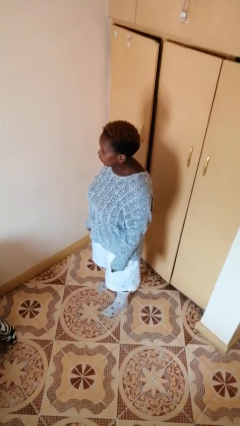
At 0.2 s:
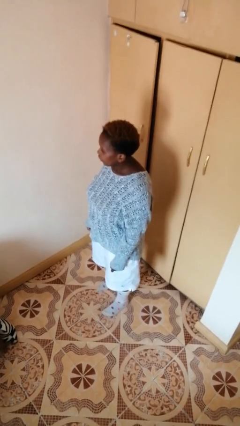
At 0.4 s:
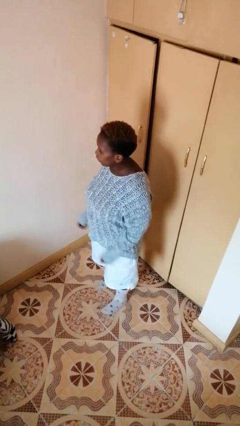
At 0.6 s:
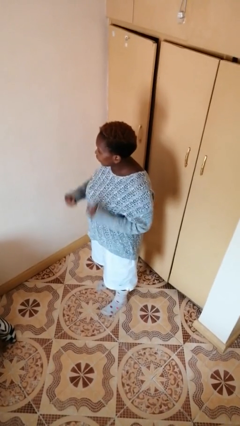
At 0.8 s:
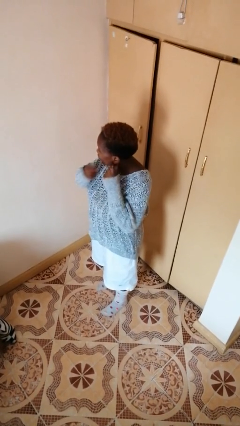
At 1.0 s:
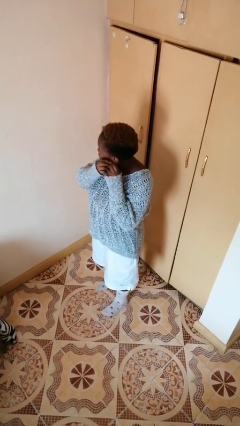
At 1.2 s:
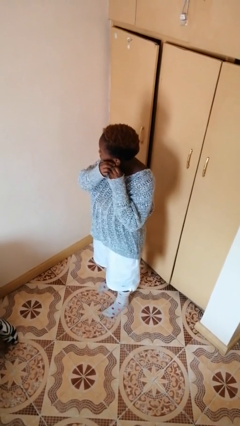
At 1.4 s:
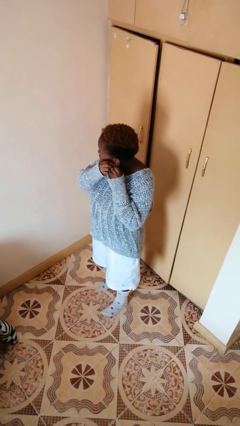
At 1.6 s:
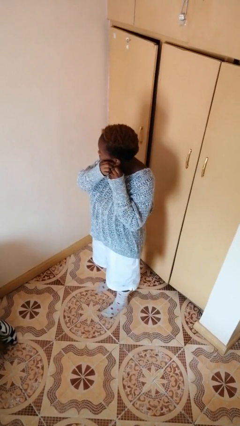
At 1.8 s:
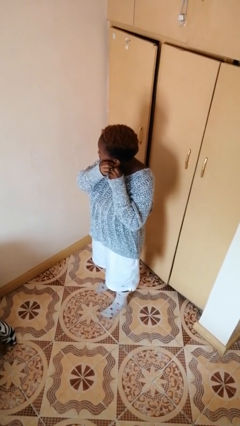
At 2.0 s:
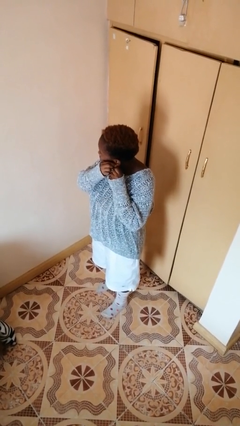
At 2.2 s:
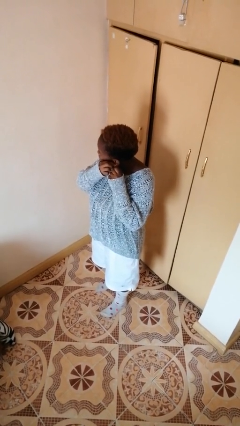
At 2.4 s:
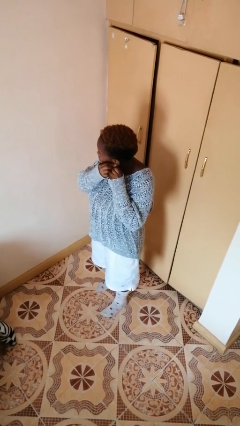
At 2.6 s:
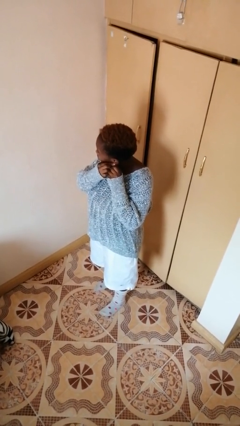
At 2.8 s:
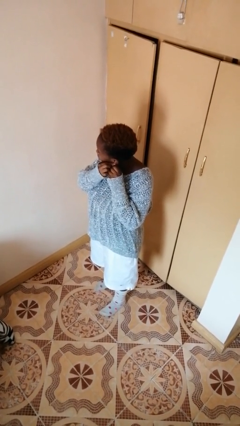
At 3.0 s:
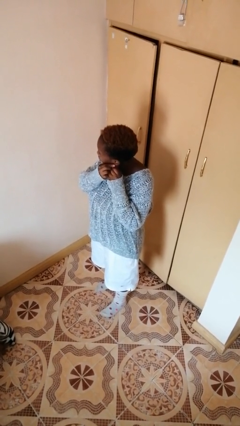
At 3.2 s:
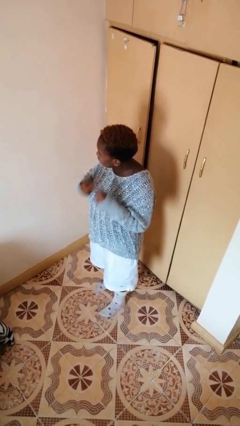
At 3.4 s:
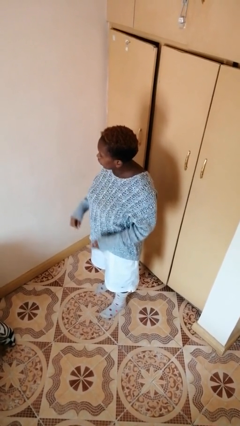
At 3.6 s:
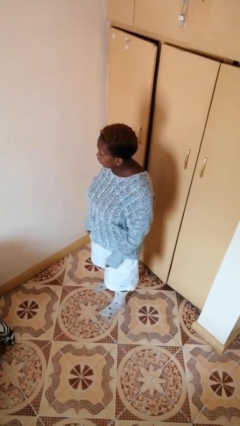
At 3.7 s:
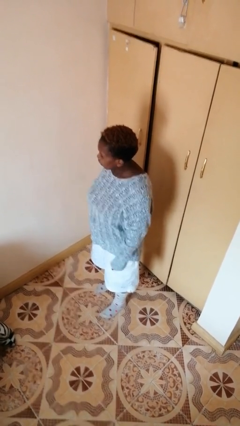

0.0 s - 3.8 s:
person puts on earrings

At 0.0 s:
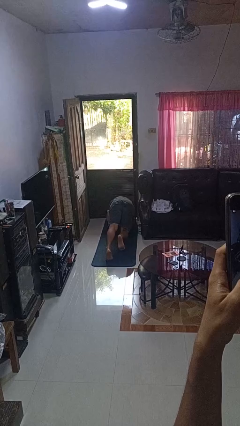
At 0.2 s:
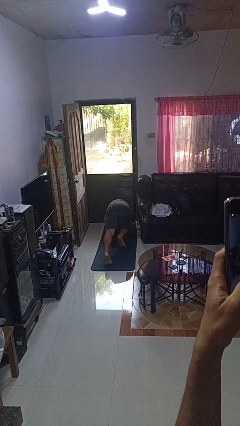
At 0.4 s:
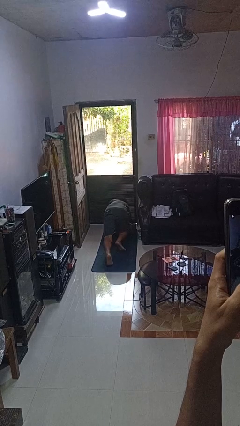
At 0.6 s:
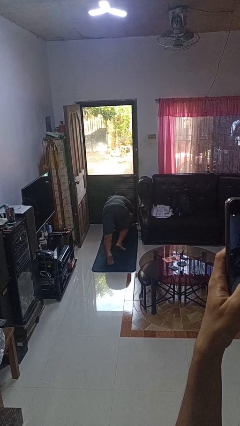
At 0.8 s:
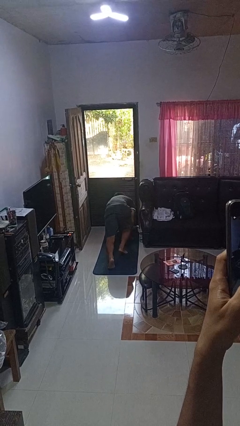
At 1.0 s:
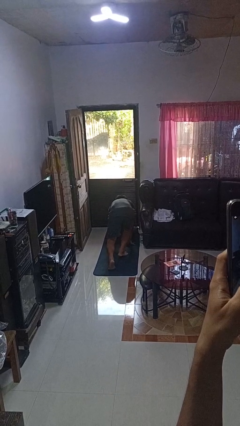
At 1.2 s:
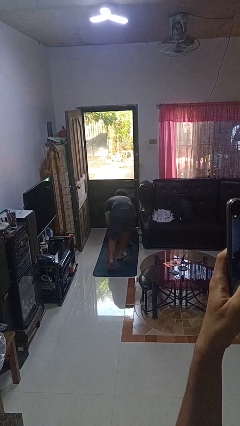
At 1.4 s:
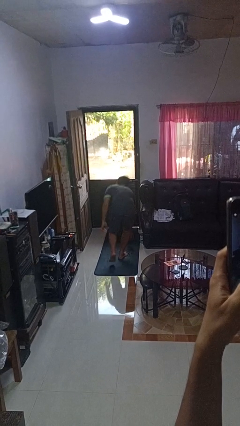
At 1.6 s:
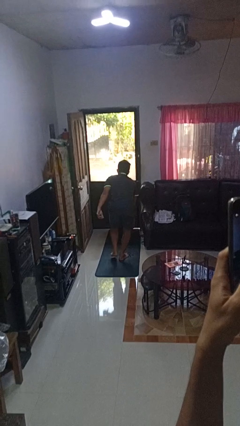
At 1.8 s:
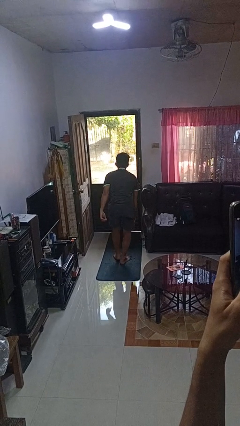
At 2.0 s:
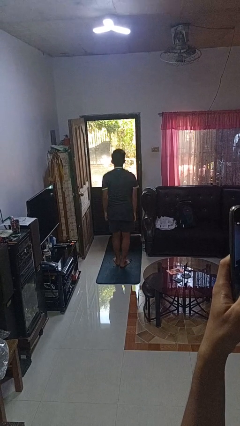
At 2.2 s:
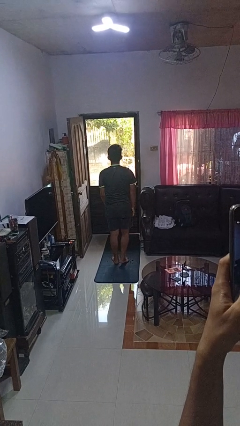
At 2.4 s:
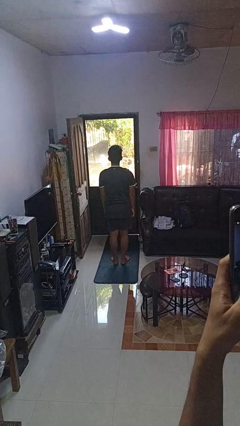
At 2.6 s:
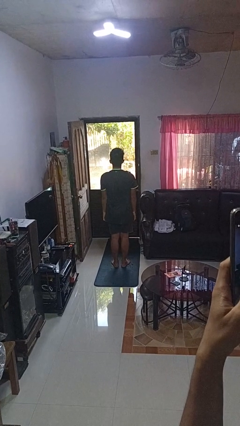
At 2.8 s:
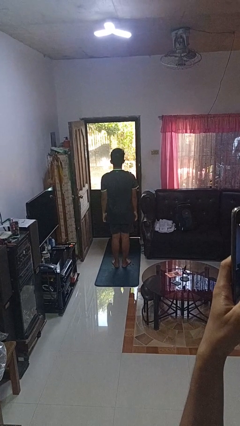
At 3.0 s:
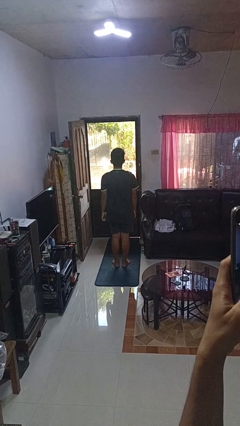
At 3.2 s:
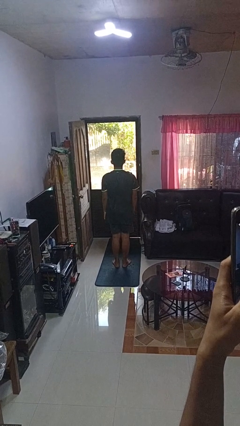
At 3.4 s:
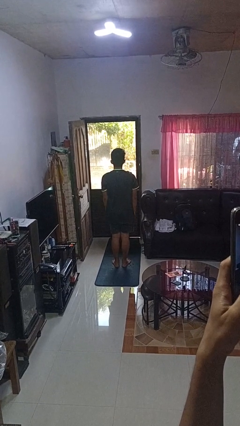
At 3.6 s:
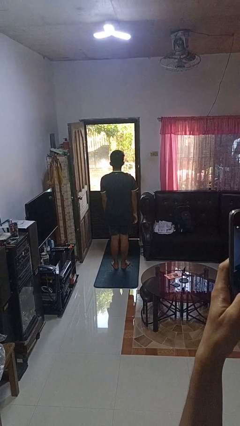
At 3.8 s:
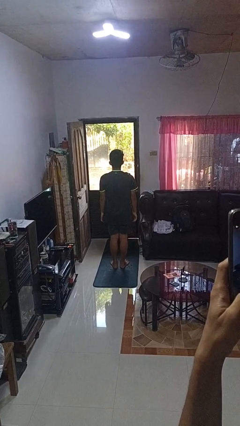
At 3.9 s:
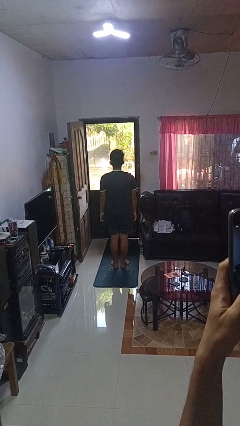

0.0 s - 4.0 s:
person stands up from floor

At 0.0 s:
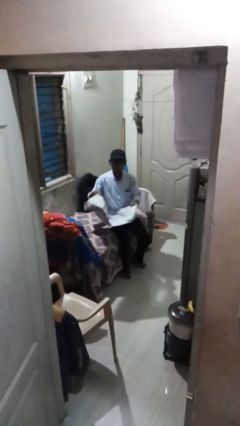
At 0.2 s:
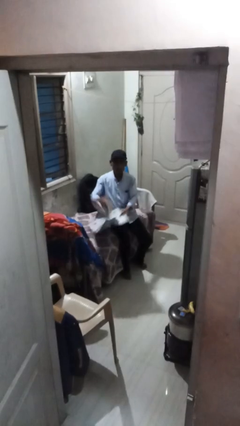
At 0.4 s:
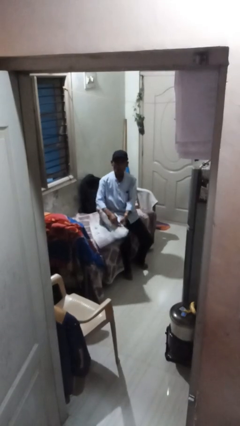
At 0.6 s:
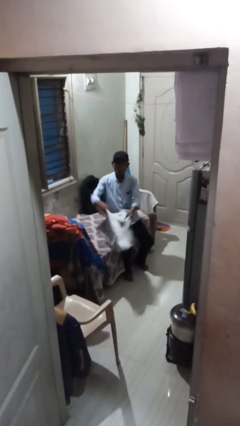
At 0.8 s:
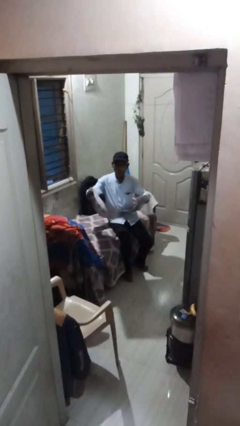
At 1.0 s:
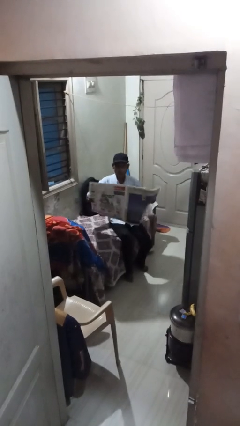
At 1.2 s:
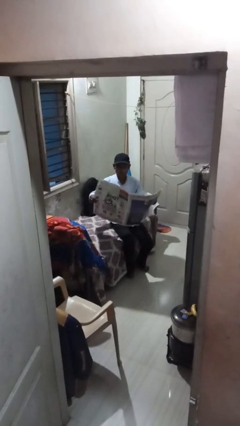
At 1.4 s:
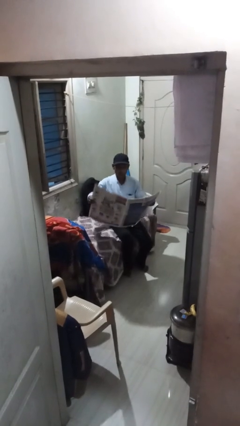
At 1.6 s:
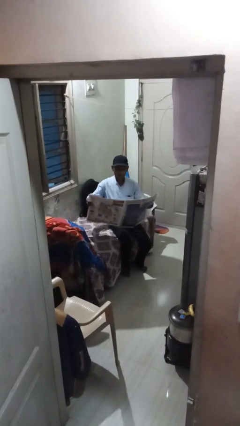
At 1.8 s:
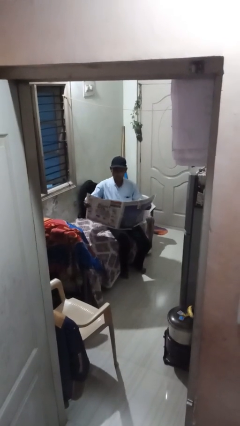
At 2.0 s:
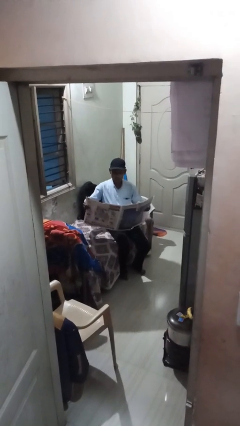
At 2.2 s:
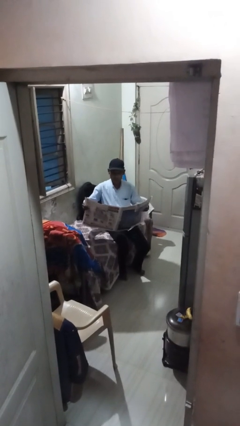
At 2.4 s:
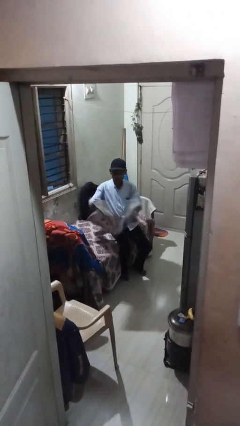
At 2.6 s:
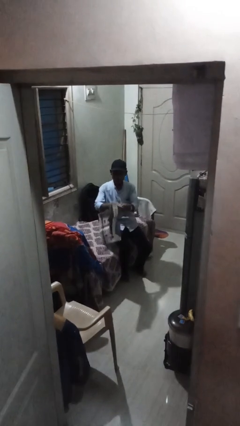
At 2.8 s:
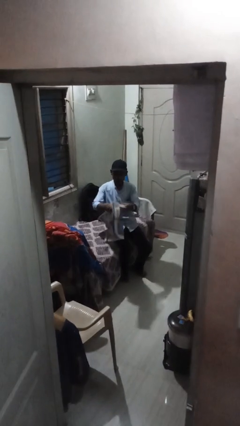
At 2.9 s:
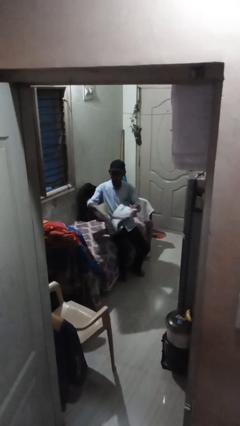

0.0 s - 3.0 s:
person reads newspaper

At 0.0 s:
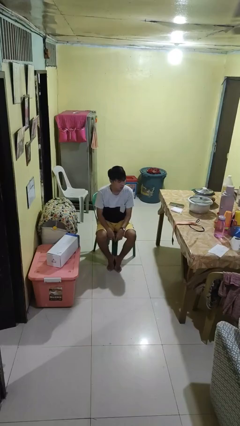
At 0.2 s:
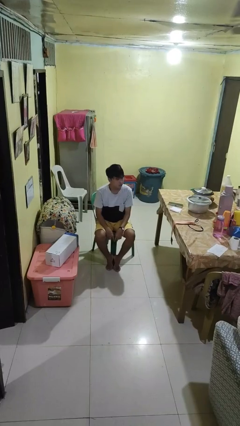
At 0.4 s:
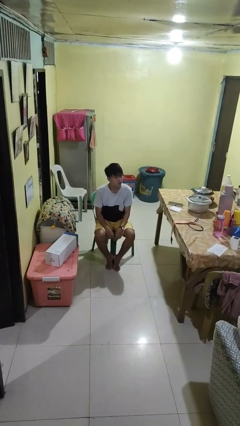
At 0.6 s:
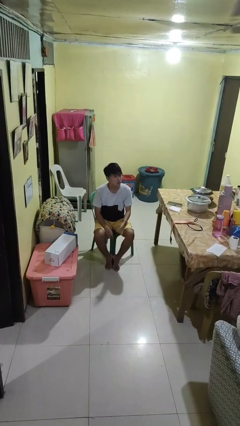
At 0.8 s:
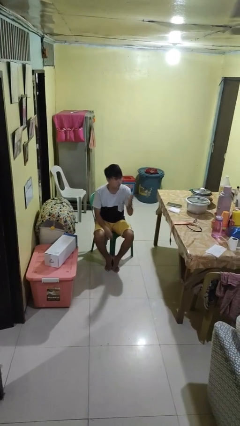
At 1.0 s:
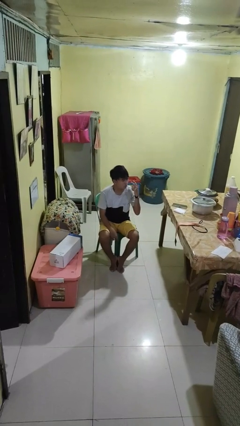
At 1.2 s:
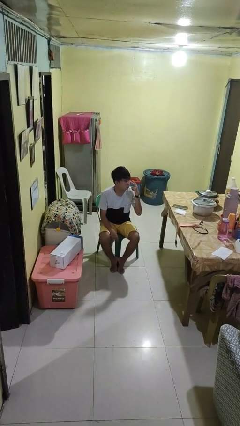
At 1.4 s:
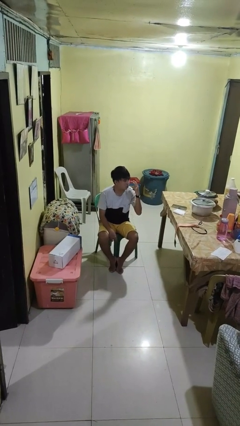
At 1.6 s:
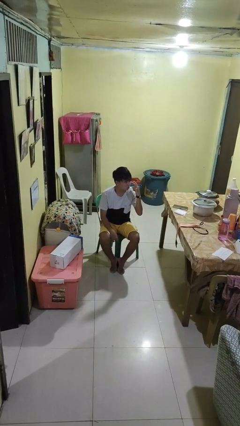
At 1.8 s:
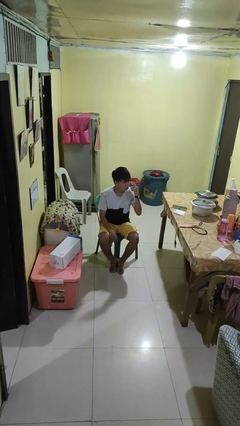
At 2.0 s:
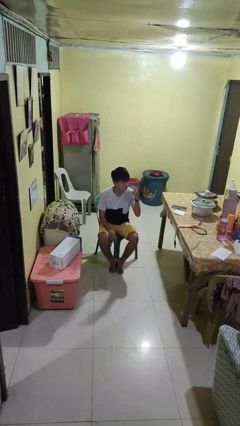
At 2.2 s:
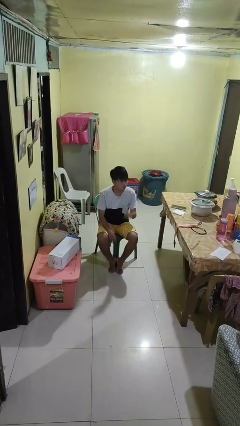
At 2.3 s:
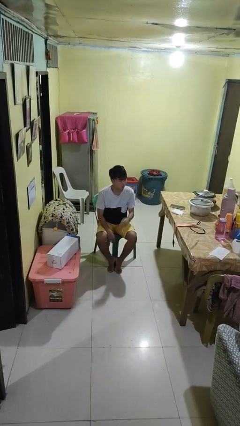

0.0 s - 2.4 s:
person gestures watch closely

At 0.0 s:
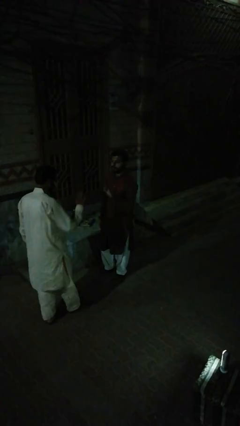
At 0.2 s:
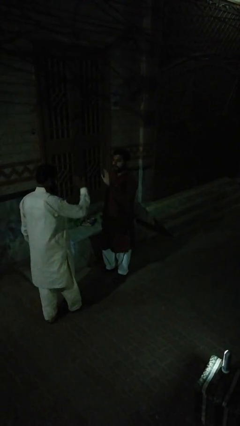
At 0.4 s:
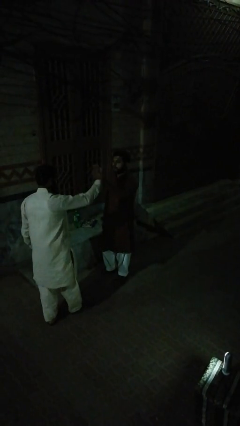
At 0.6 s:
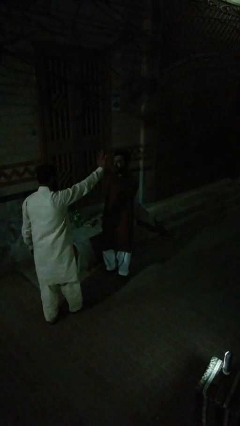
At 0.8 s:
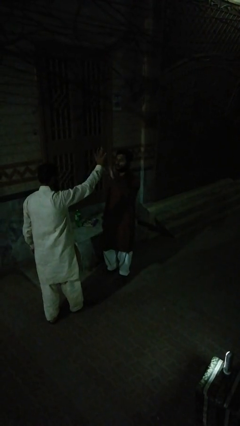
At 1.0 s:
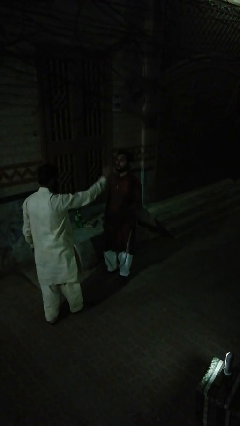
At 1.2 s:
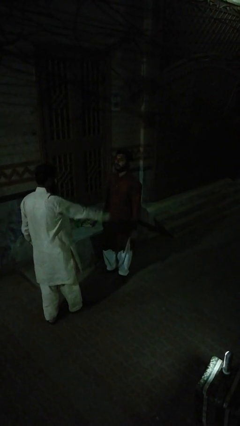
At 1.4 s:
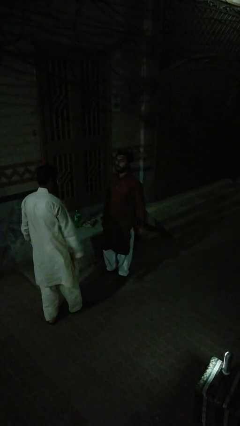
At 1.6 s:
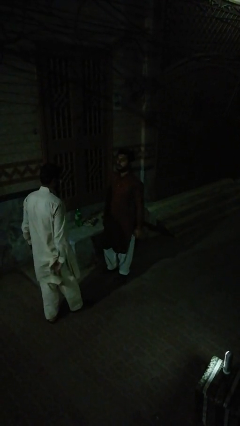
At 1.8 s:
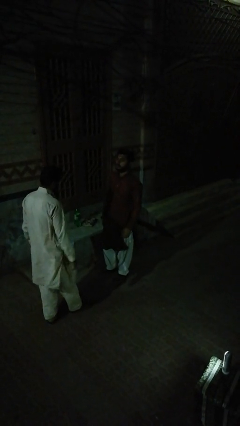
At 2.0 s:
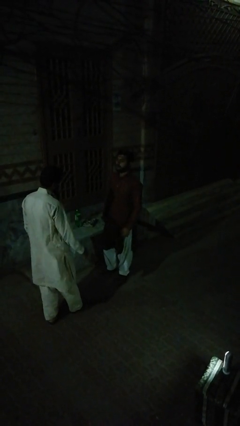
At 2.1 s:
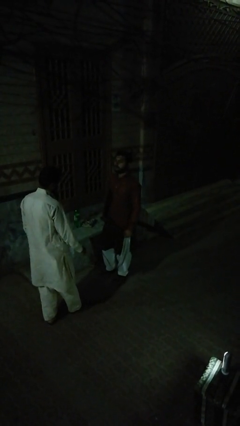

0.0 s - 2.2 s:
person highfives hand

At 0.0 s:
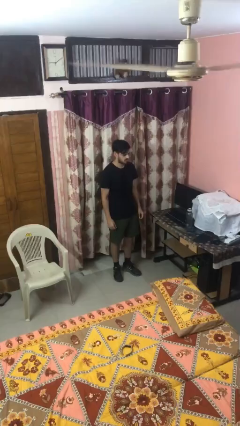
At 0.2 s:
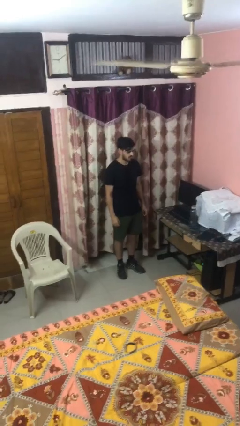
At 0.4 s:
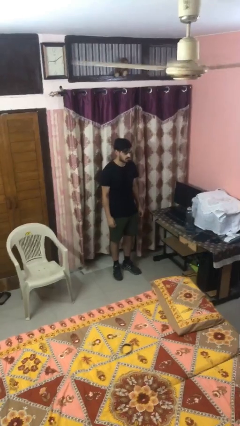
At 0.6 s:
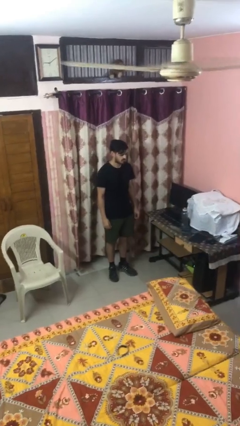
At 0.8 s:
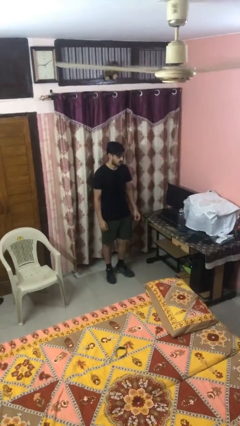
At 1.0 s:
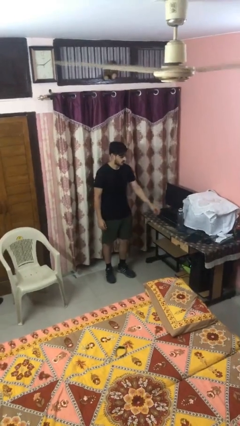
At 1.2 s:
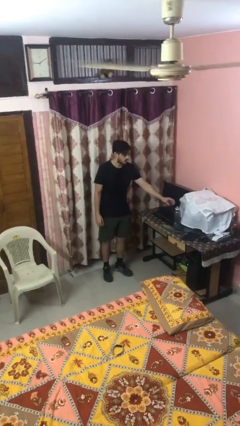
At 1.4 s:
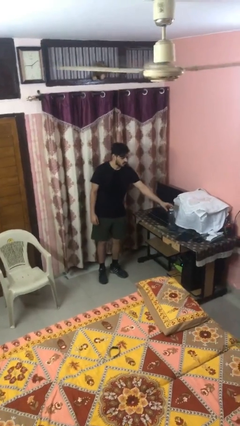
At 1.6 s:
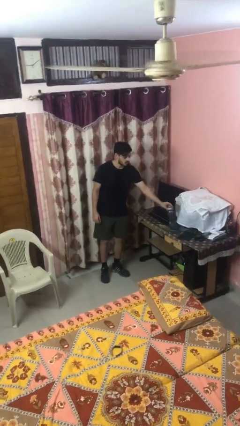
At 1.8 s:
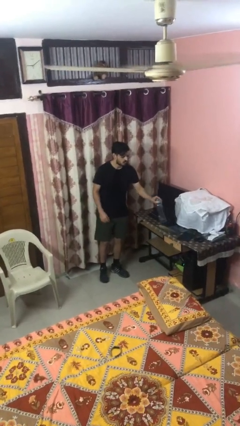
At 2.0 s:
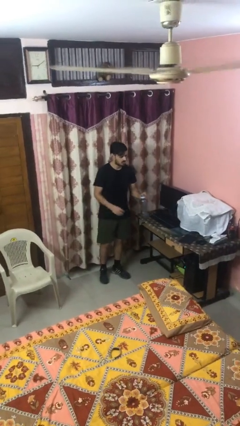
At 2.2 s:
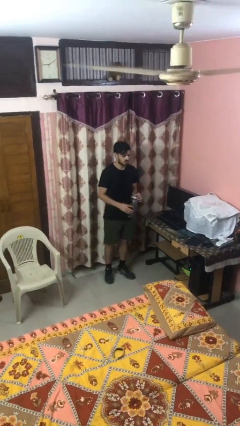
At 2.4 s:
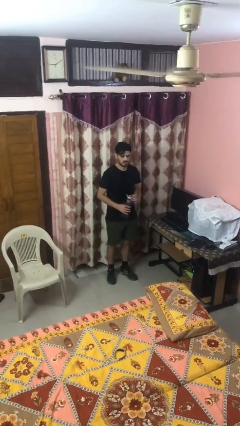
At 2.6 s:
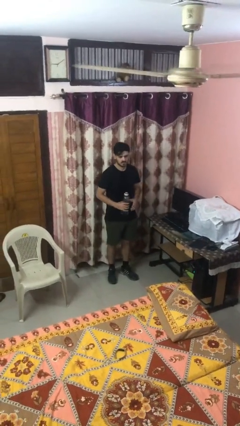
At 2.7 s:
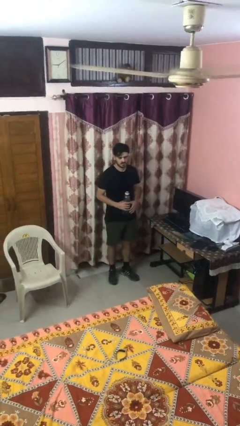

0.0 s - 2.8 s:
person picks up object from countertop
